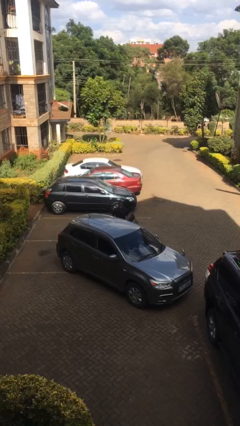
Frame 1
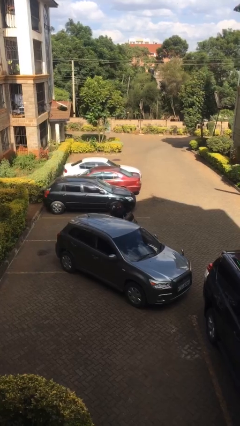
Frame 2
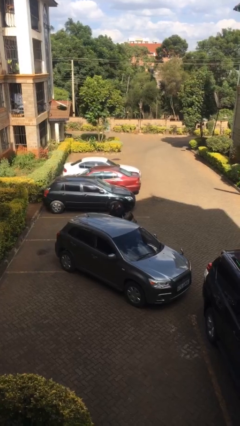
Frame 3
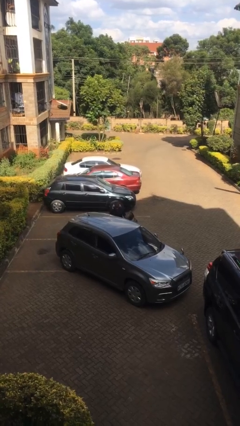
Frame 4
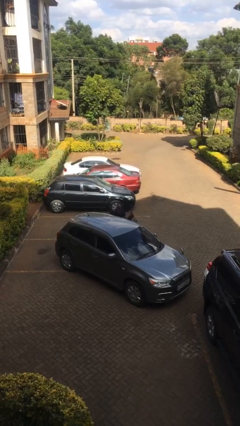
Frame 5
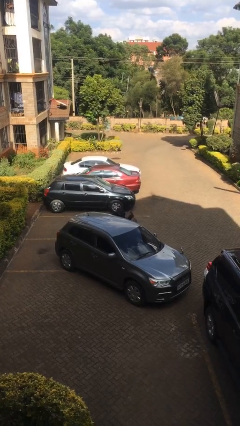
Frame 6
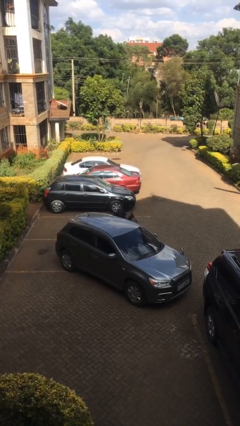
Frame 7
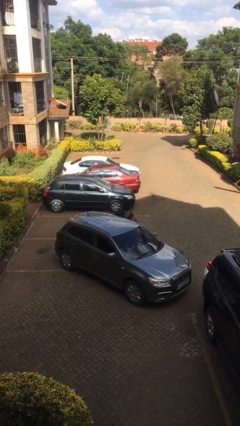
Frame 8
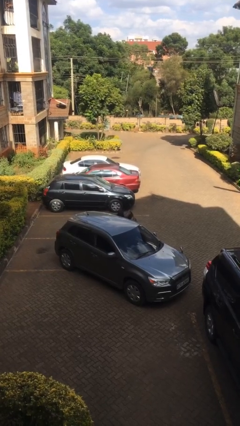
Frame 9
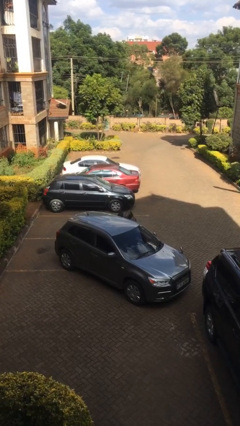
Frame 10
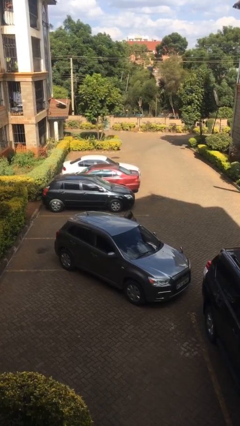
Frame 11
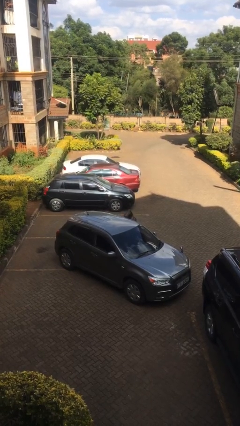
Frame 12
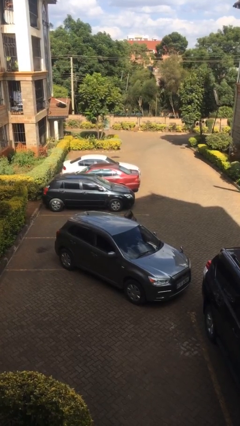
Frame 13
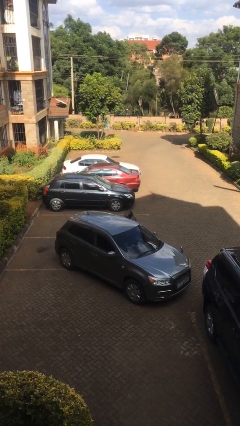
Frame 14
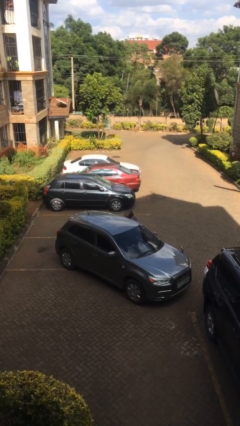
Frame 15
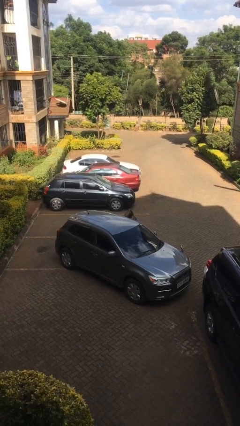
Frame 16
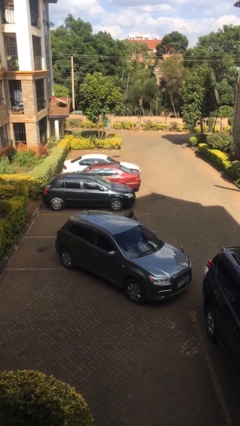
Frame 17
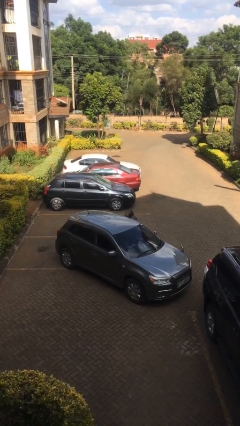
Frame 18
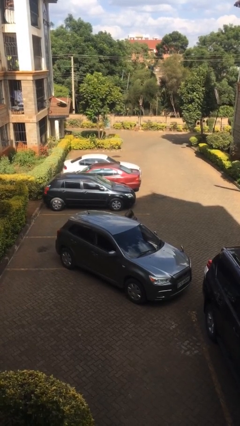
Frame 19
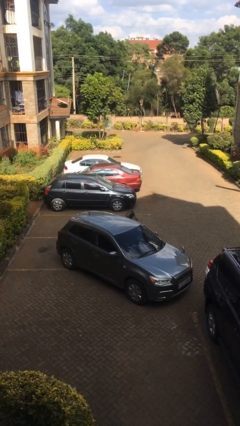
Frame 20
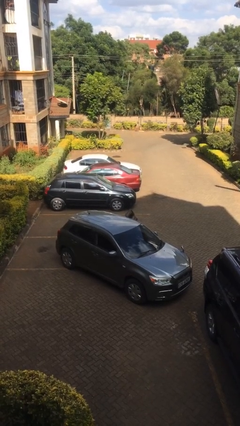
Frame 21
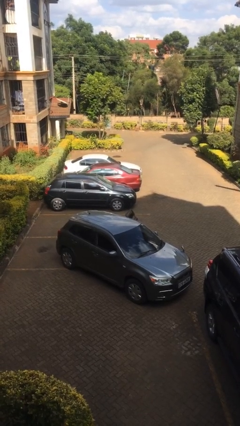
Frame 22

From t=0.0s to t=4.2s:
person enters car

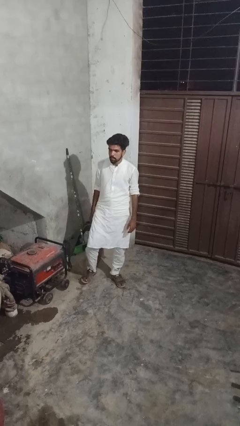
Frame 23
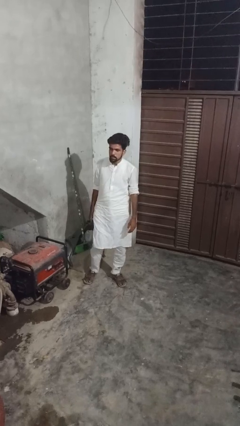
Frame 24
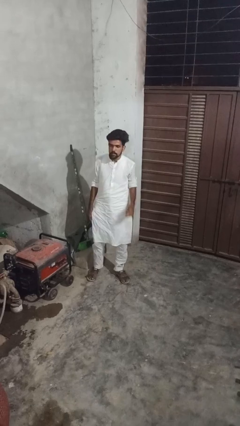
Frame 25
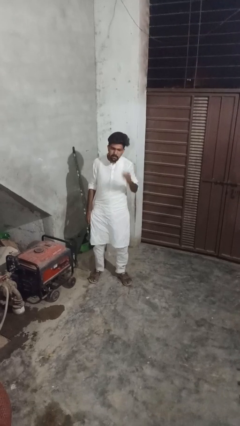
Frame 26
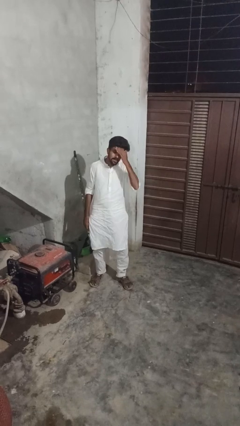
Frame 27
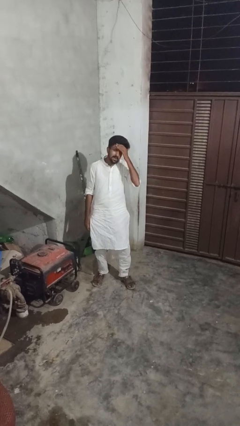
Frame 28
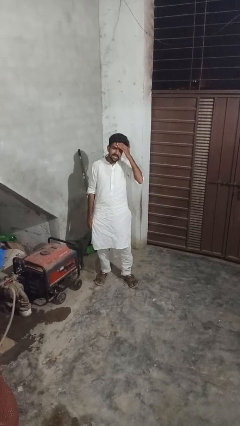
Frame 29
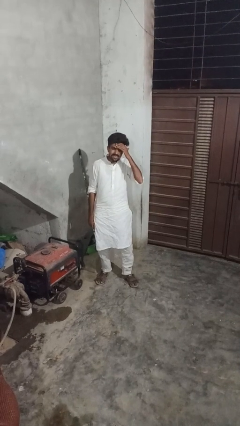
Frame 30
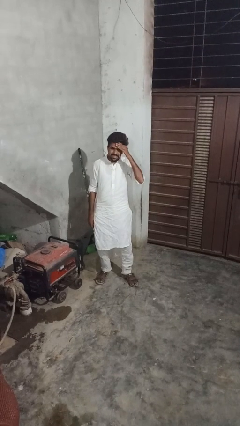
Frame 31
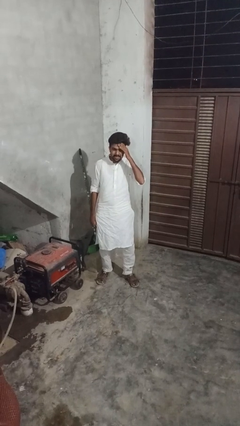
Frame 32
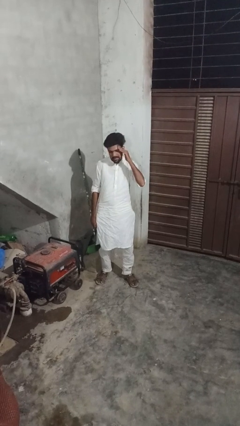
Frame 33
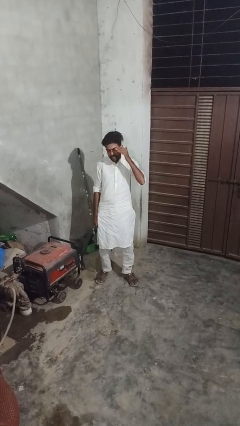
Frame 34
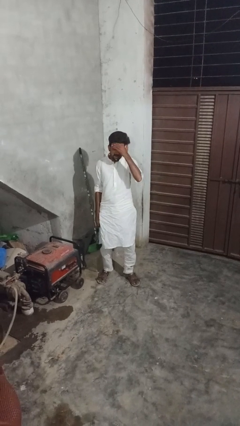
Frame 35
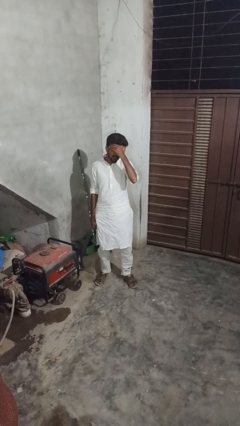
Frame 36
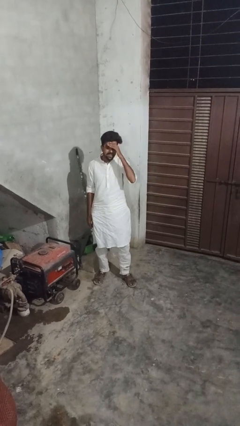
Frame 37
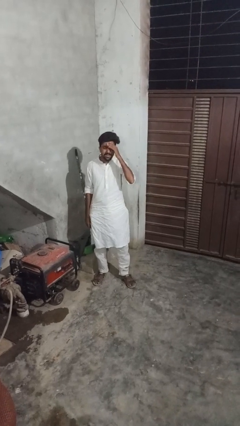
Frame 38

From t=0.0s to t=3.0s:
person scratches face

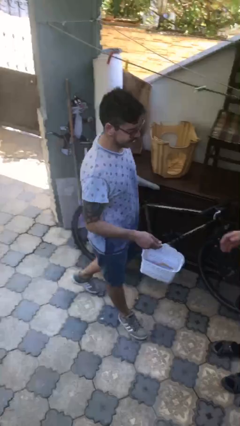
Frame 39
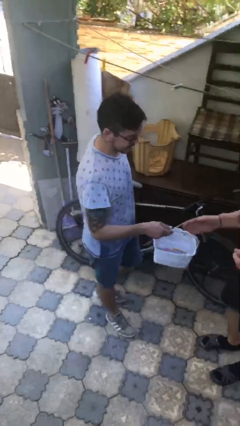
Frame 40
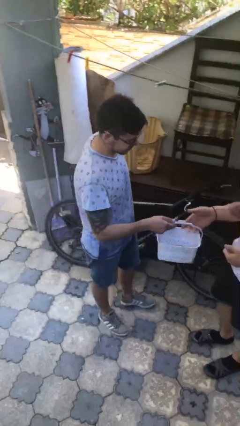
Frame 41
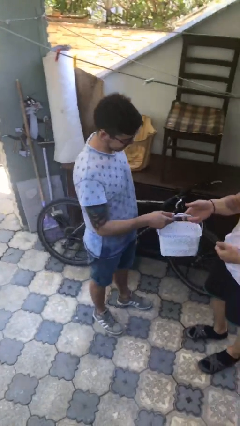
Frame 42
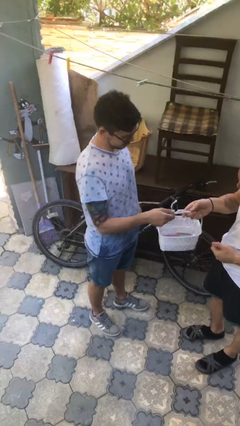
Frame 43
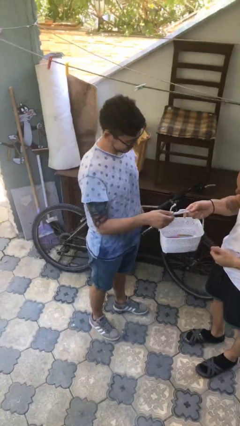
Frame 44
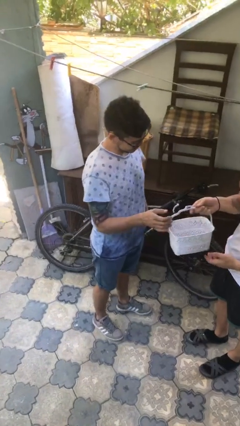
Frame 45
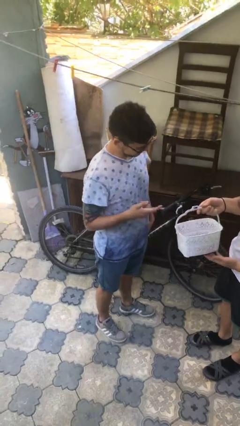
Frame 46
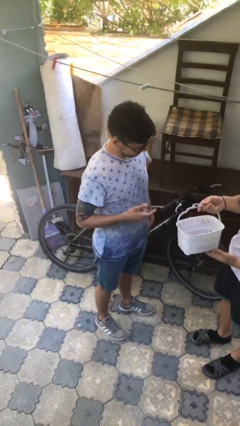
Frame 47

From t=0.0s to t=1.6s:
person transfers object to person

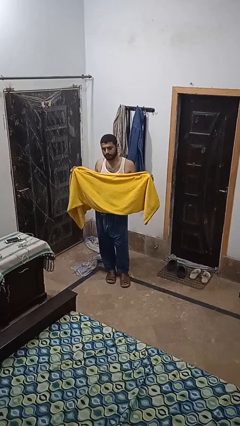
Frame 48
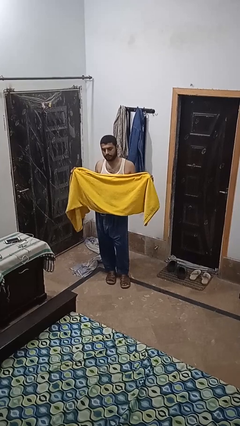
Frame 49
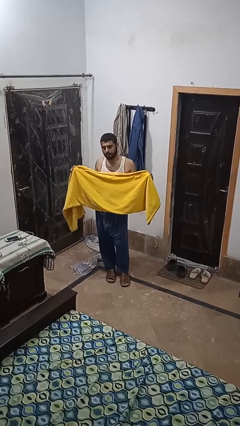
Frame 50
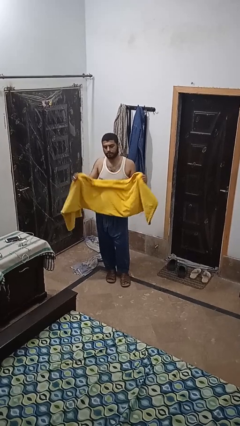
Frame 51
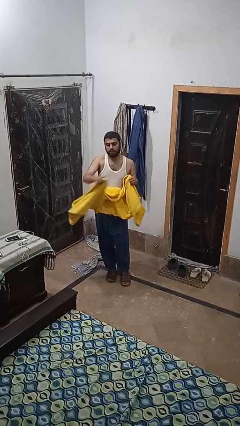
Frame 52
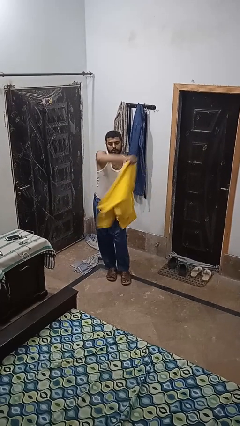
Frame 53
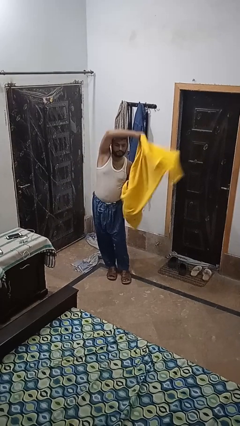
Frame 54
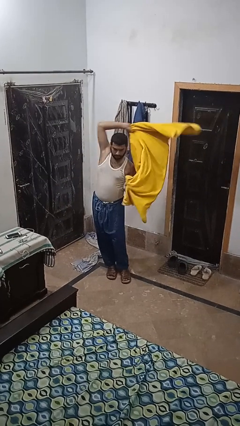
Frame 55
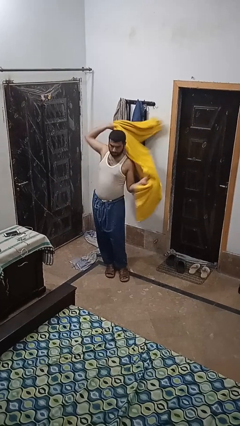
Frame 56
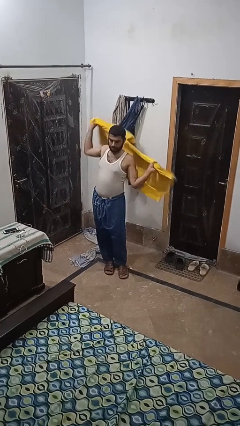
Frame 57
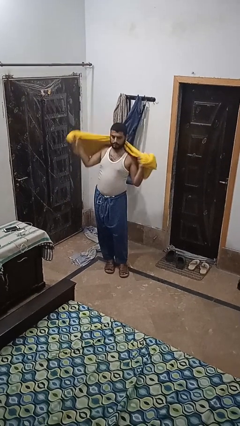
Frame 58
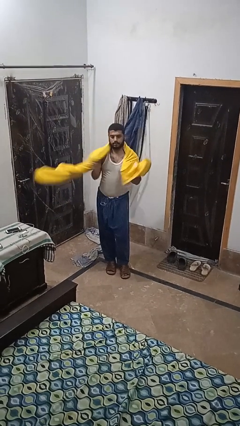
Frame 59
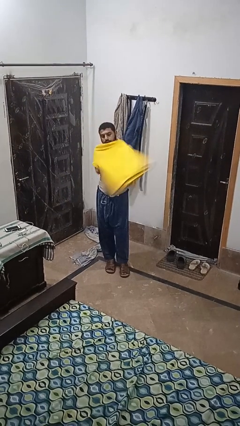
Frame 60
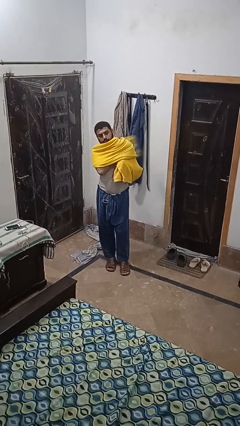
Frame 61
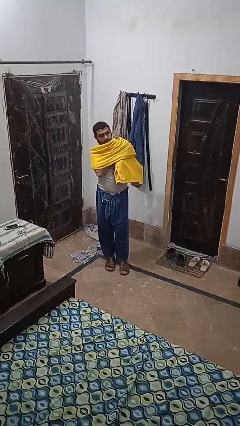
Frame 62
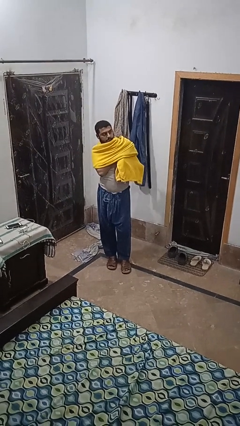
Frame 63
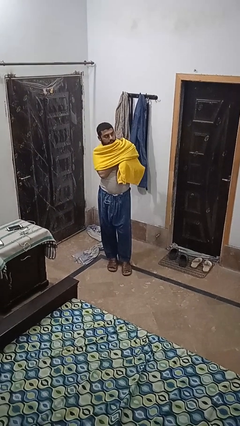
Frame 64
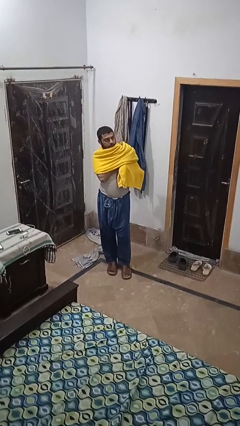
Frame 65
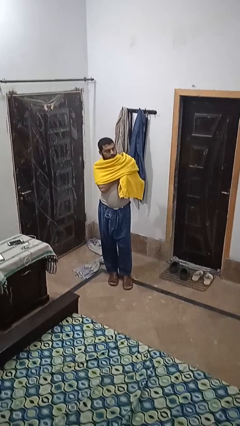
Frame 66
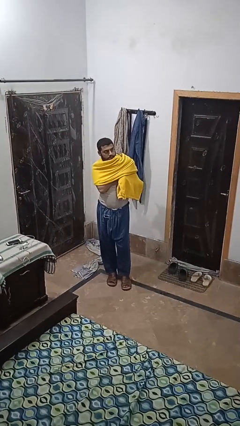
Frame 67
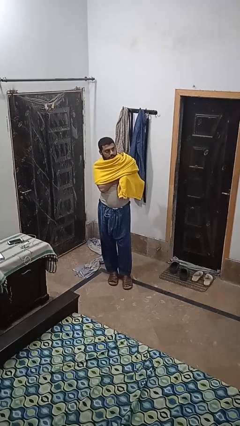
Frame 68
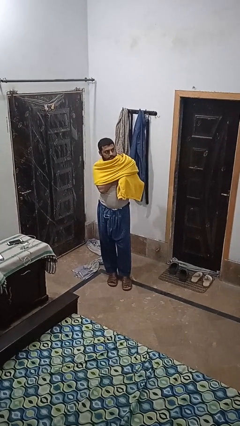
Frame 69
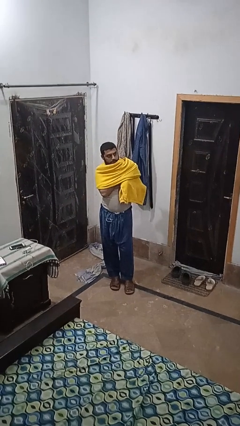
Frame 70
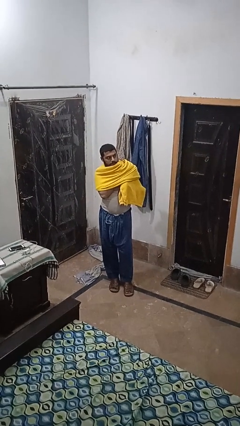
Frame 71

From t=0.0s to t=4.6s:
person puts on scarf

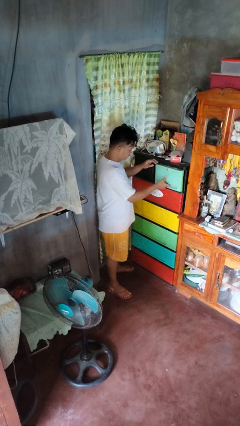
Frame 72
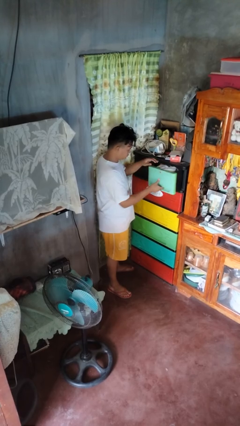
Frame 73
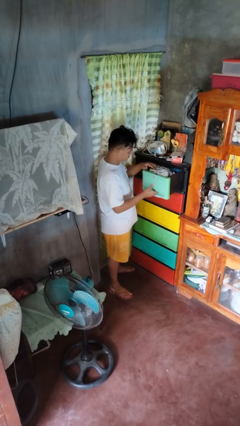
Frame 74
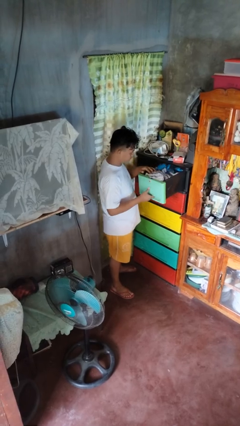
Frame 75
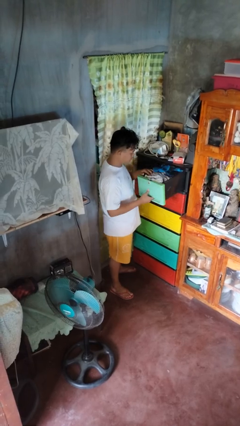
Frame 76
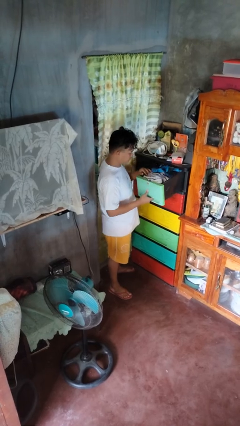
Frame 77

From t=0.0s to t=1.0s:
person opens dresser drawer

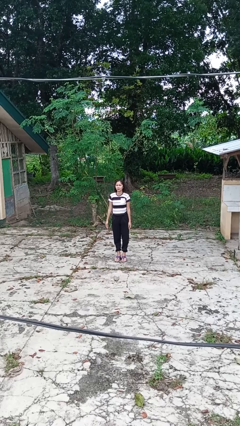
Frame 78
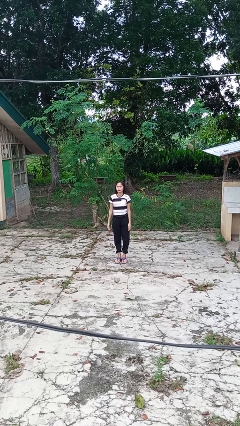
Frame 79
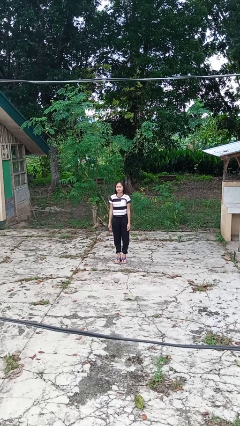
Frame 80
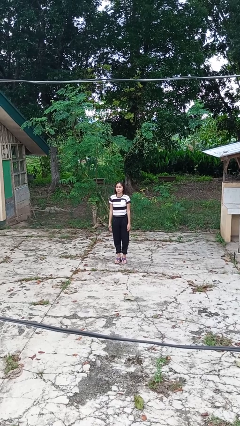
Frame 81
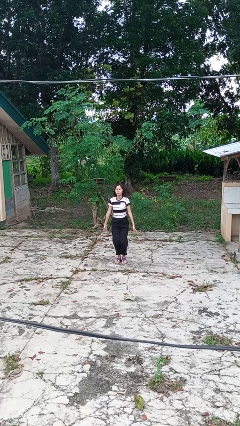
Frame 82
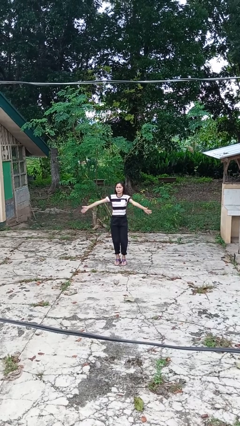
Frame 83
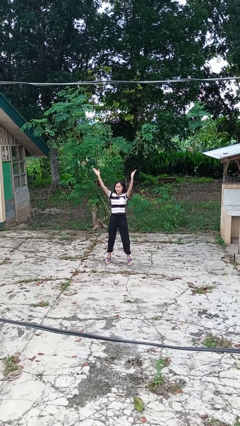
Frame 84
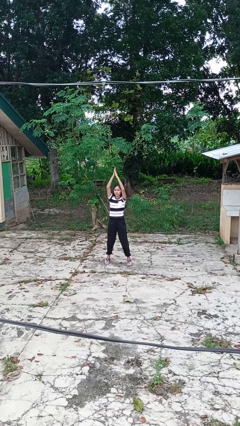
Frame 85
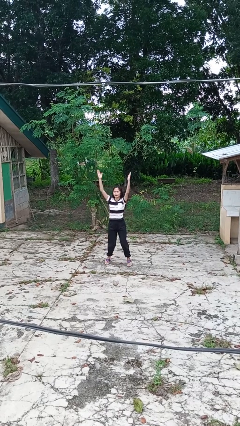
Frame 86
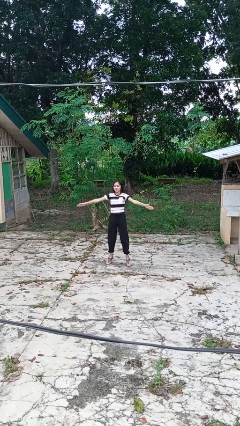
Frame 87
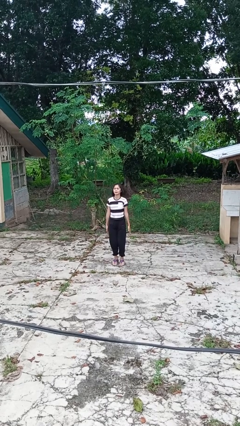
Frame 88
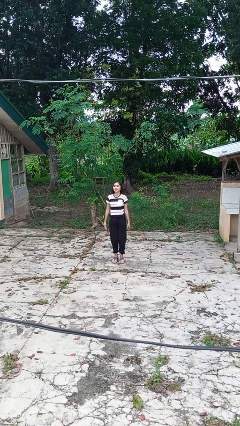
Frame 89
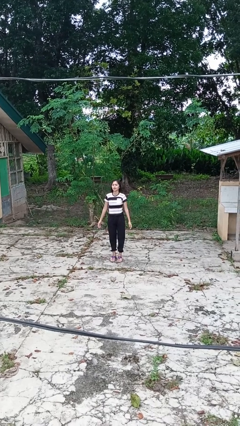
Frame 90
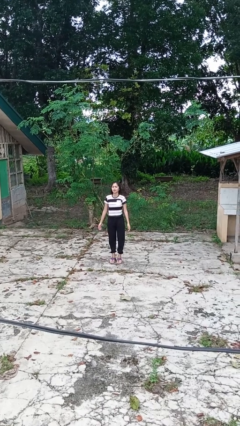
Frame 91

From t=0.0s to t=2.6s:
person exercises with jumping jacks

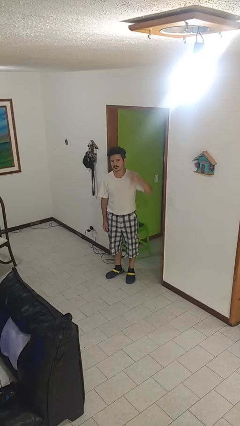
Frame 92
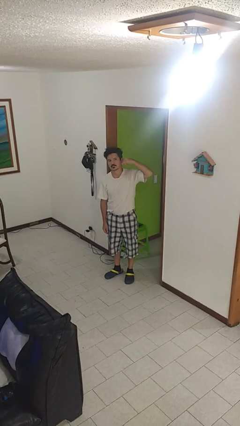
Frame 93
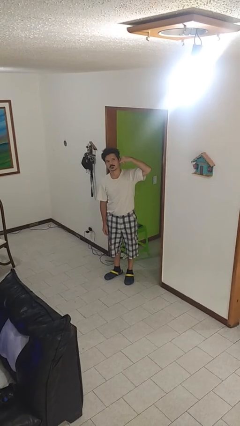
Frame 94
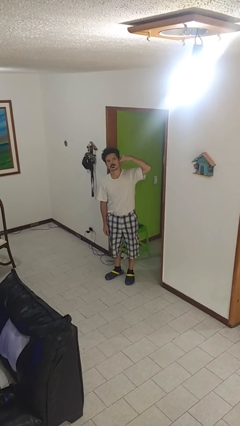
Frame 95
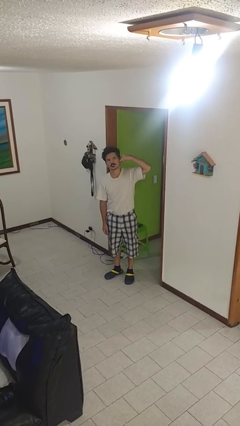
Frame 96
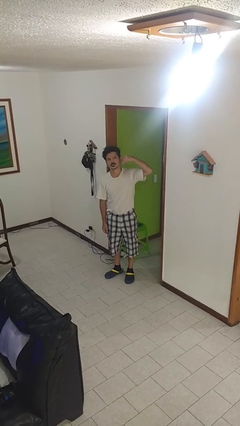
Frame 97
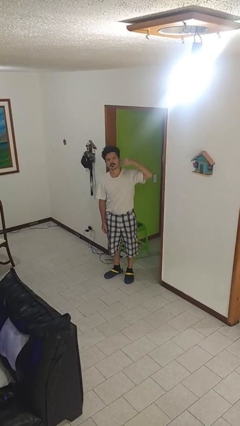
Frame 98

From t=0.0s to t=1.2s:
person gestures call me
